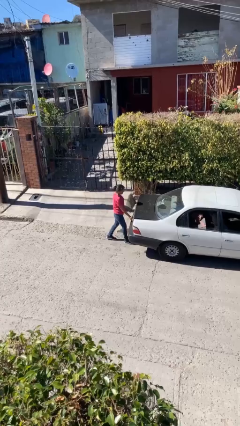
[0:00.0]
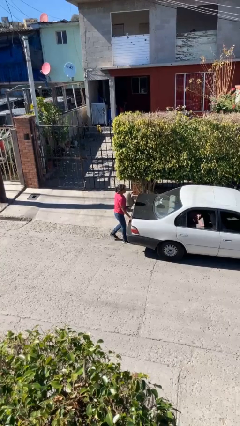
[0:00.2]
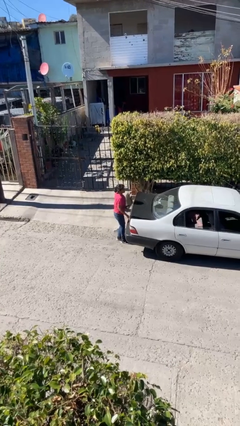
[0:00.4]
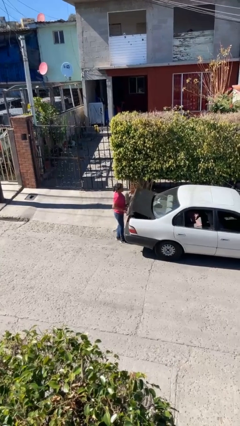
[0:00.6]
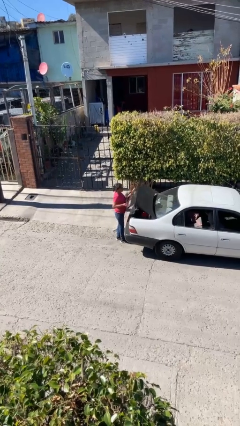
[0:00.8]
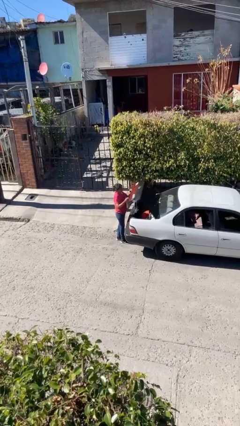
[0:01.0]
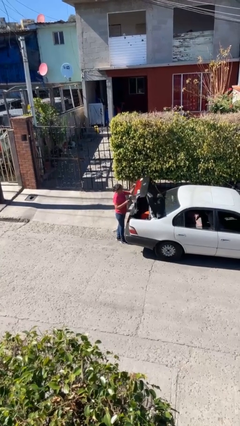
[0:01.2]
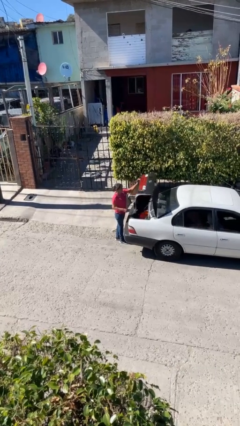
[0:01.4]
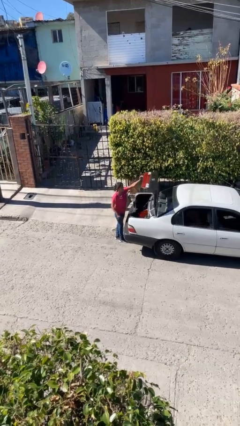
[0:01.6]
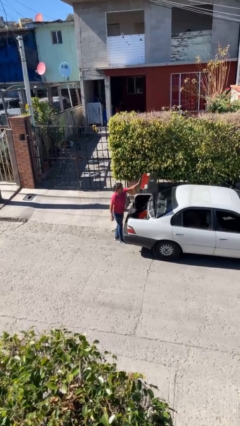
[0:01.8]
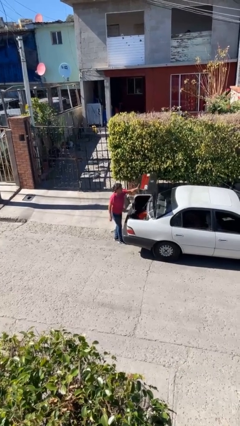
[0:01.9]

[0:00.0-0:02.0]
person opens car trunk

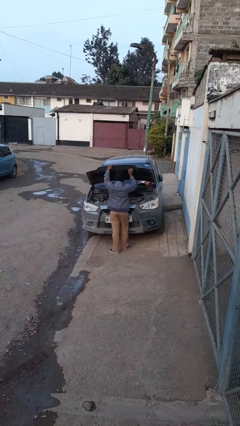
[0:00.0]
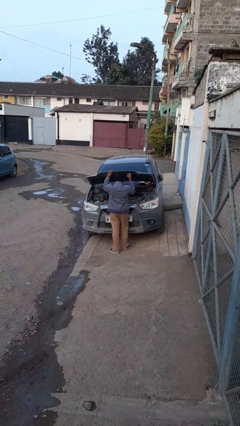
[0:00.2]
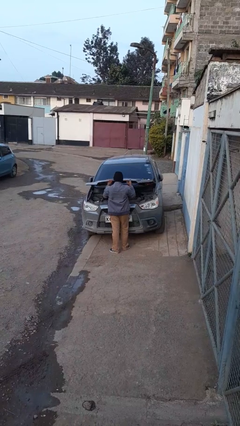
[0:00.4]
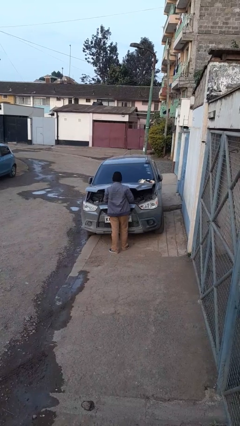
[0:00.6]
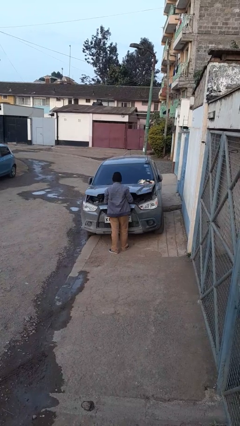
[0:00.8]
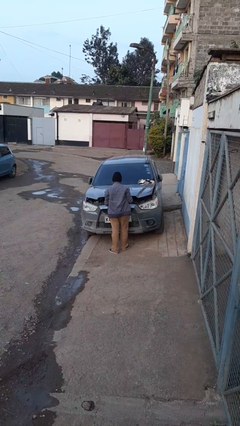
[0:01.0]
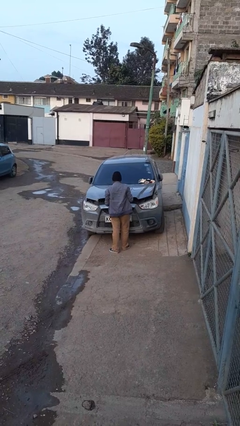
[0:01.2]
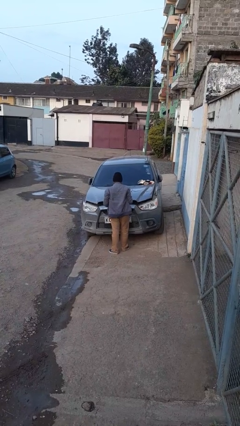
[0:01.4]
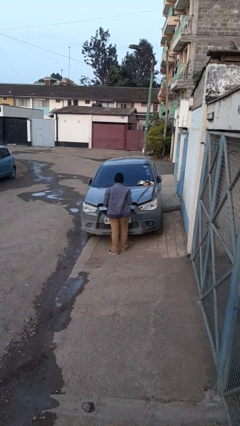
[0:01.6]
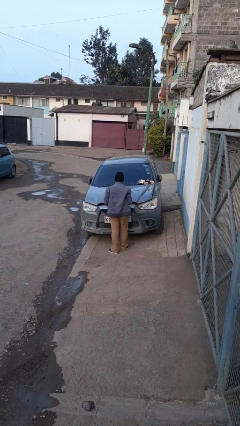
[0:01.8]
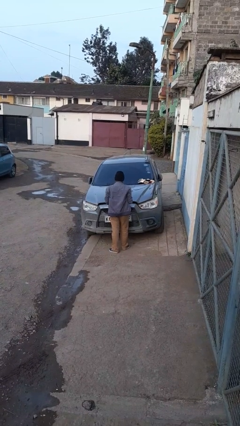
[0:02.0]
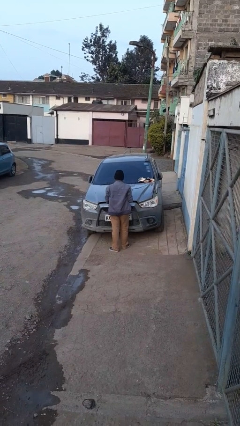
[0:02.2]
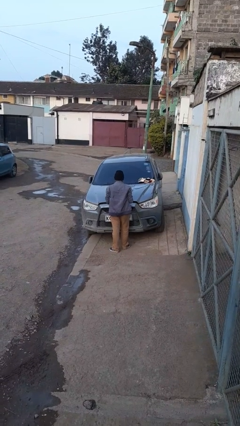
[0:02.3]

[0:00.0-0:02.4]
person closes car hood

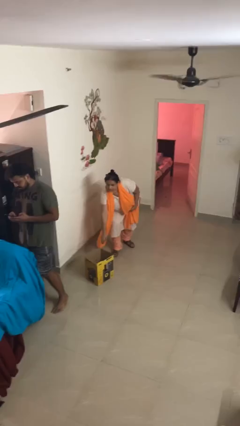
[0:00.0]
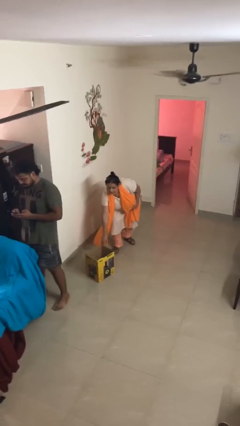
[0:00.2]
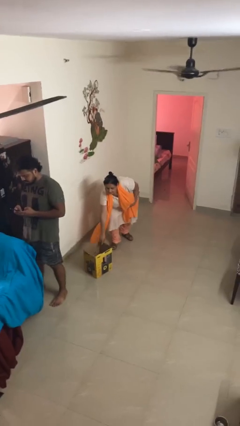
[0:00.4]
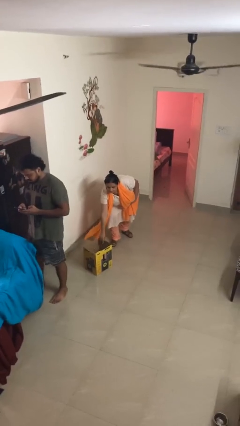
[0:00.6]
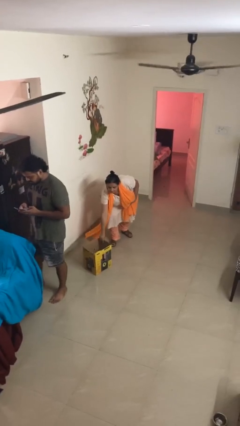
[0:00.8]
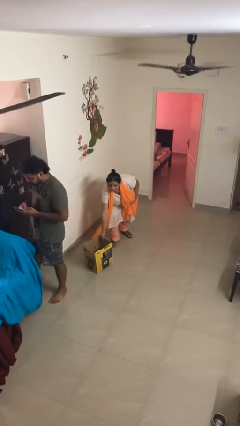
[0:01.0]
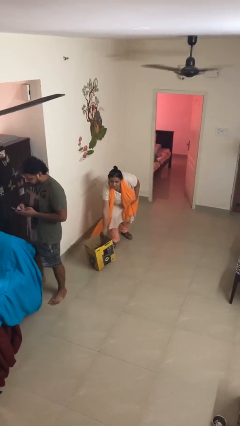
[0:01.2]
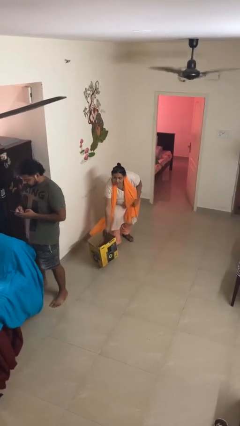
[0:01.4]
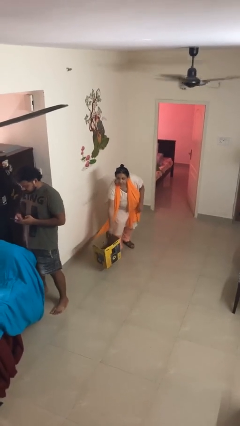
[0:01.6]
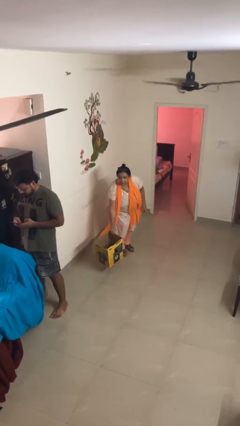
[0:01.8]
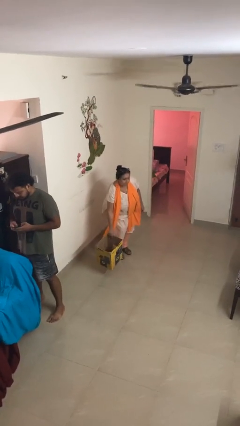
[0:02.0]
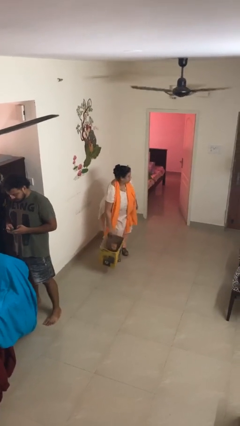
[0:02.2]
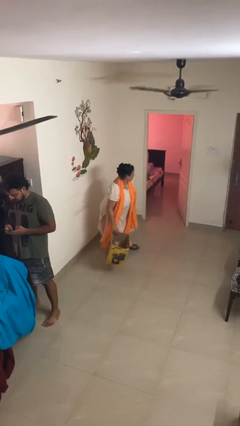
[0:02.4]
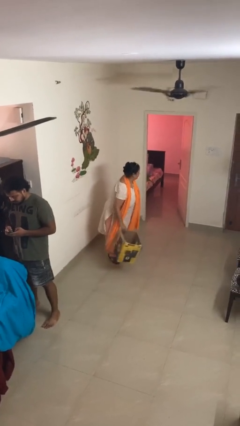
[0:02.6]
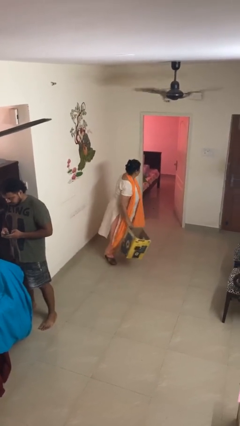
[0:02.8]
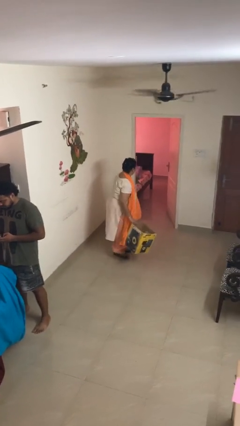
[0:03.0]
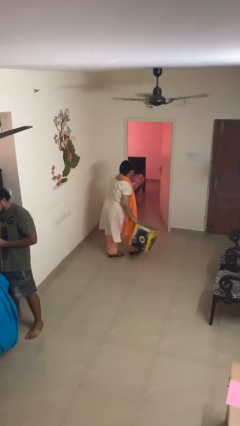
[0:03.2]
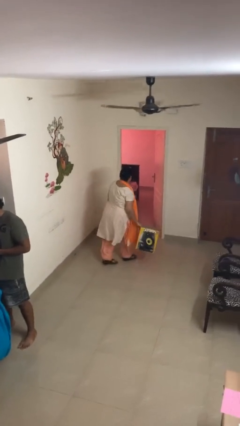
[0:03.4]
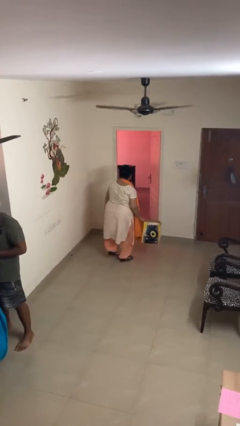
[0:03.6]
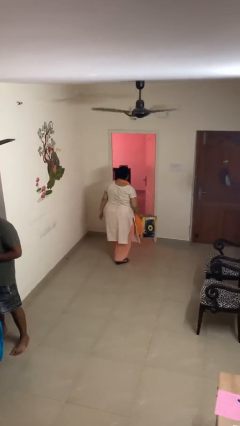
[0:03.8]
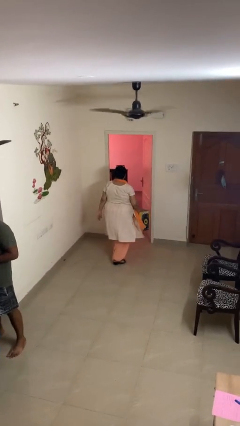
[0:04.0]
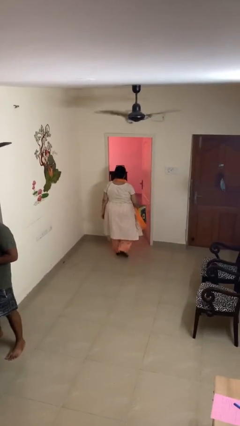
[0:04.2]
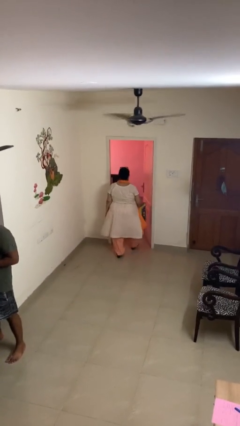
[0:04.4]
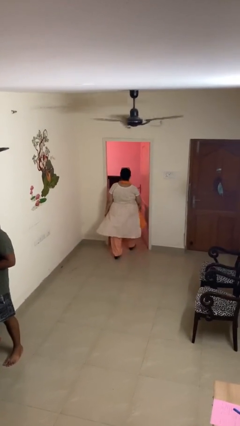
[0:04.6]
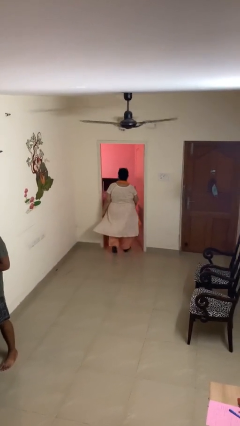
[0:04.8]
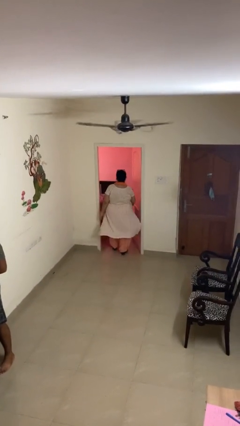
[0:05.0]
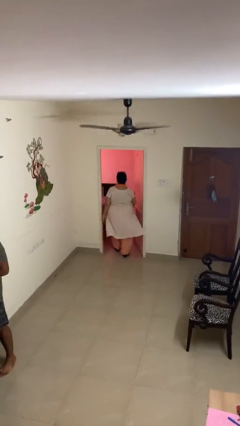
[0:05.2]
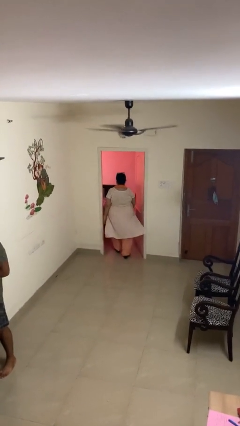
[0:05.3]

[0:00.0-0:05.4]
person steals object from person

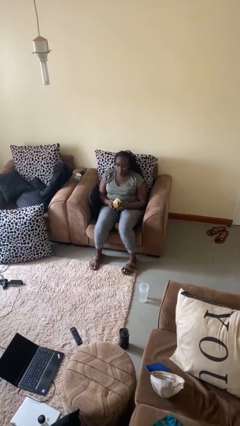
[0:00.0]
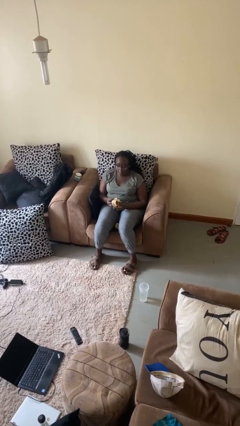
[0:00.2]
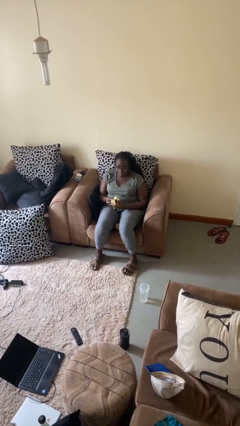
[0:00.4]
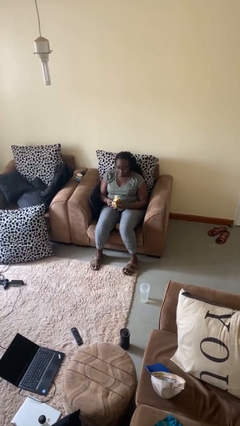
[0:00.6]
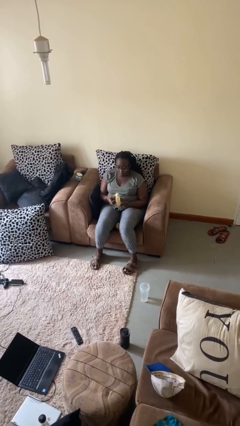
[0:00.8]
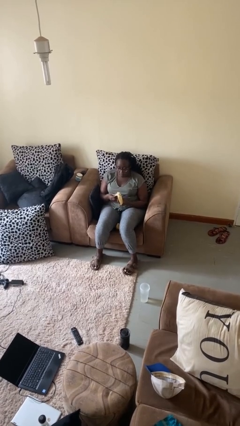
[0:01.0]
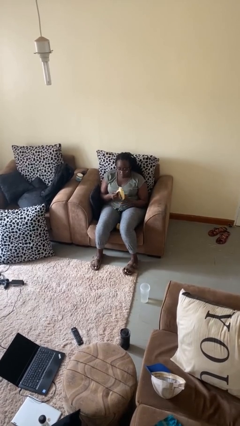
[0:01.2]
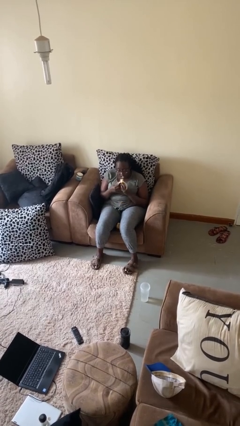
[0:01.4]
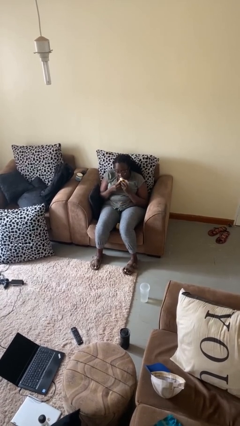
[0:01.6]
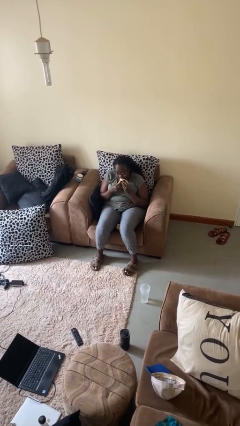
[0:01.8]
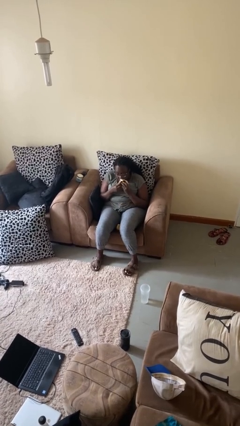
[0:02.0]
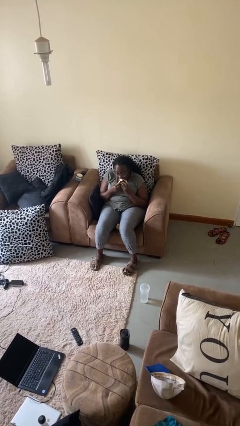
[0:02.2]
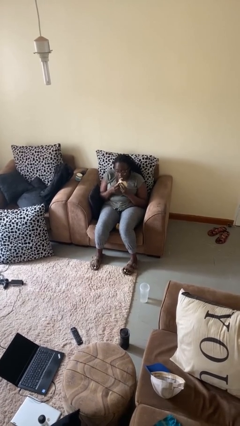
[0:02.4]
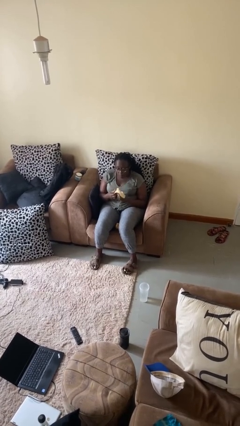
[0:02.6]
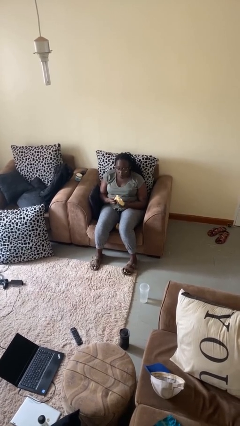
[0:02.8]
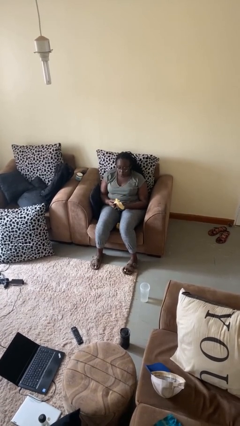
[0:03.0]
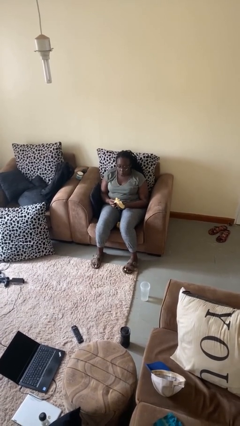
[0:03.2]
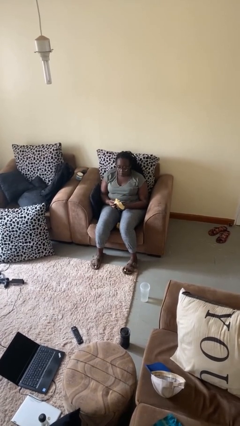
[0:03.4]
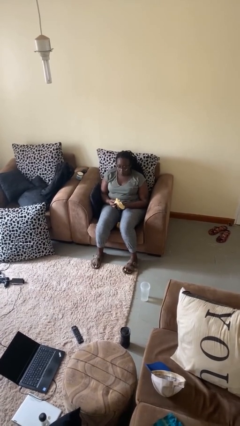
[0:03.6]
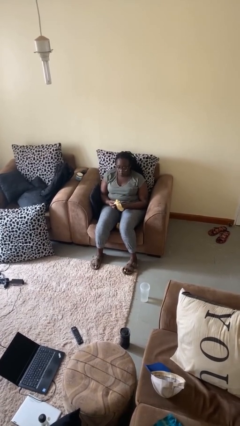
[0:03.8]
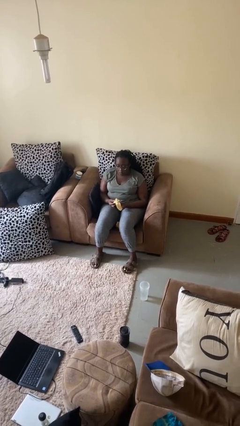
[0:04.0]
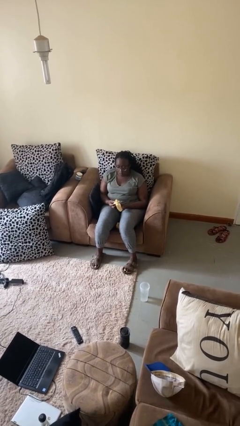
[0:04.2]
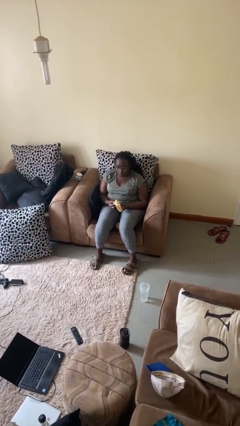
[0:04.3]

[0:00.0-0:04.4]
person eats banana

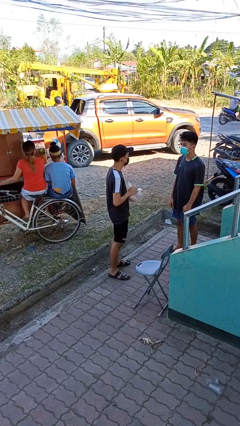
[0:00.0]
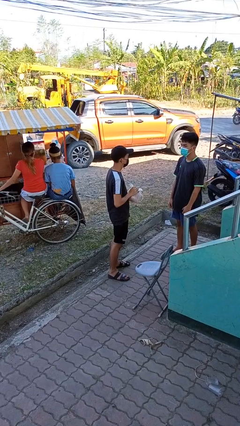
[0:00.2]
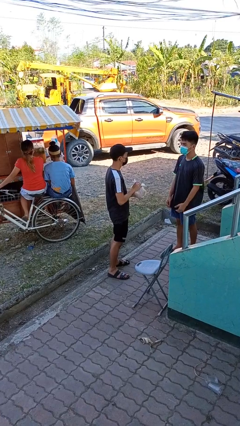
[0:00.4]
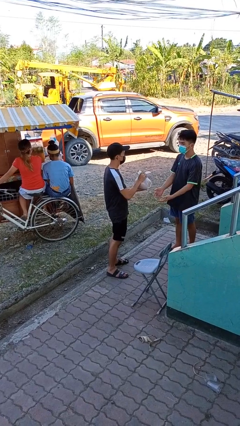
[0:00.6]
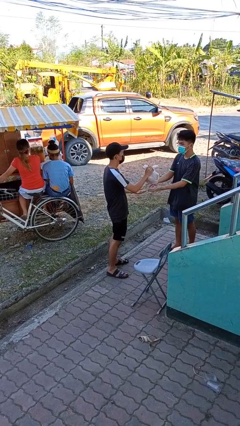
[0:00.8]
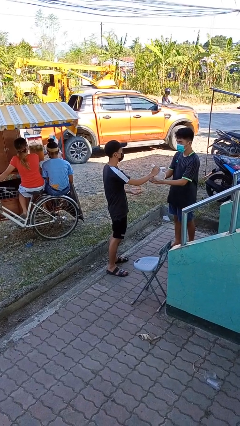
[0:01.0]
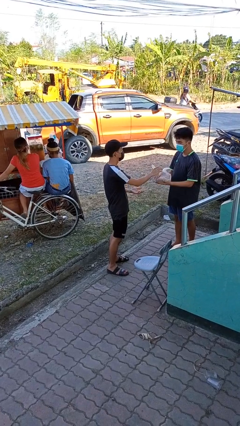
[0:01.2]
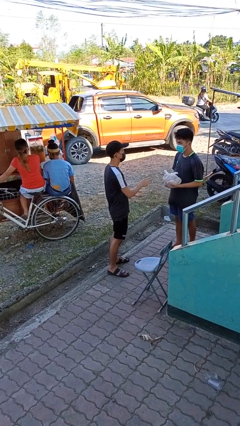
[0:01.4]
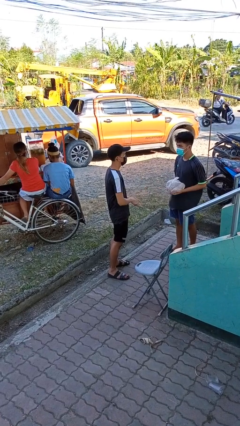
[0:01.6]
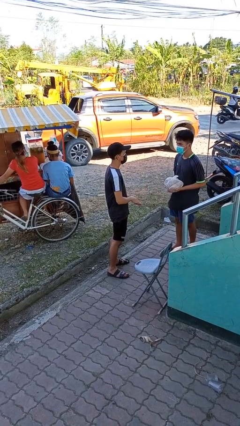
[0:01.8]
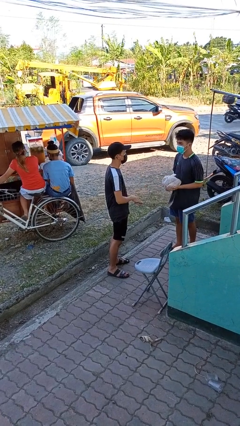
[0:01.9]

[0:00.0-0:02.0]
person transfers object to person

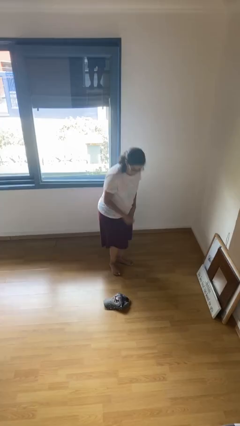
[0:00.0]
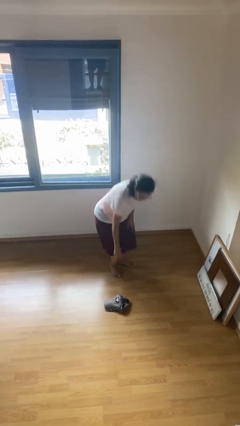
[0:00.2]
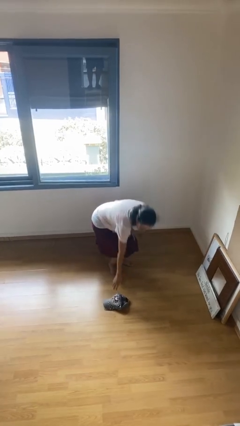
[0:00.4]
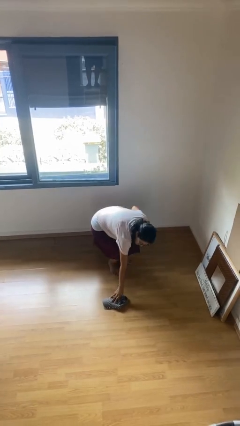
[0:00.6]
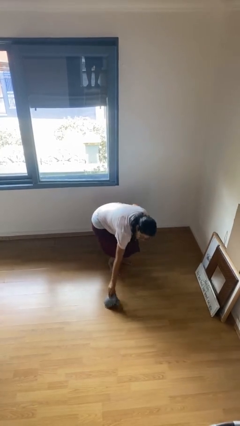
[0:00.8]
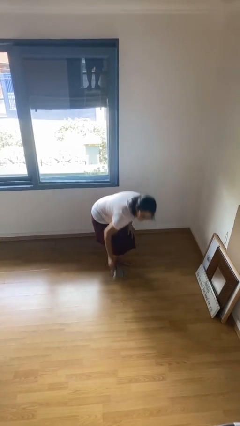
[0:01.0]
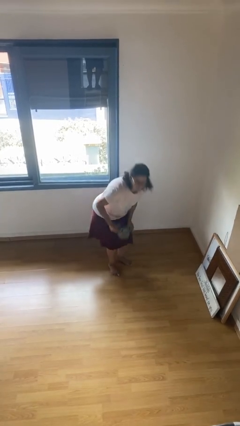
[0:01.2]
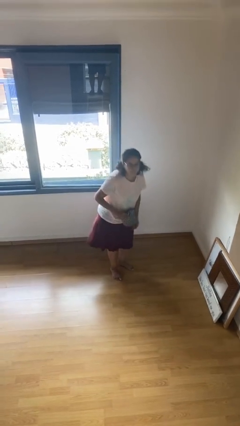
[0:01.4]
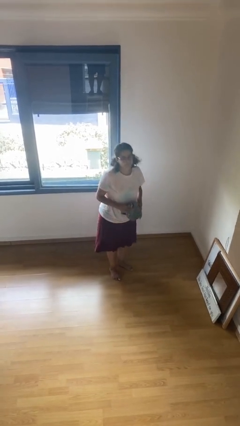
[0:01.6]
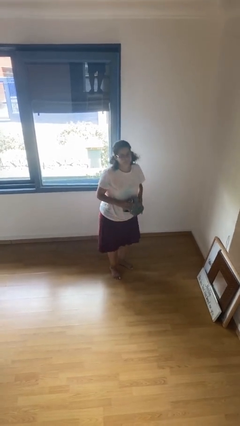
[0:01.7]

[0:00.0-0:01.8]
person picks up object from floor
